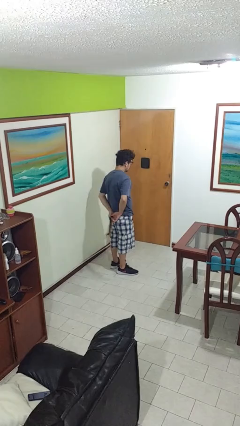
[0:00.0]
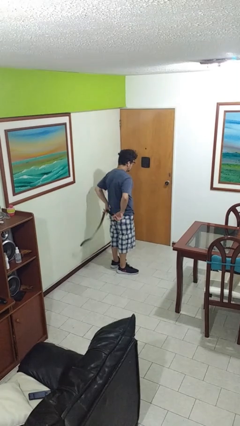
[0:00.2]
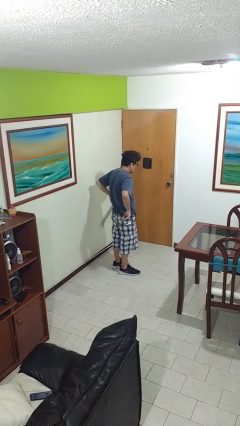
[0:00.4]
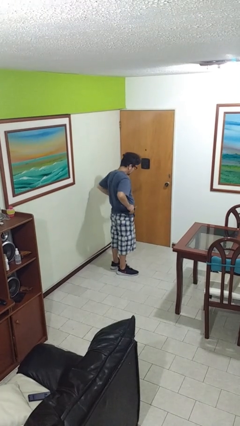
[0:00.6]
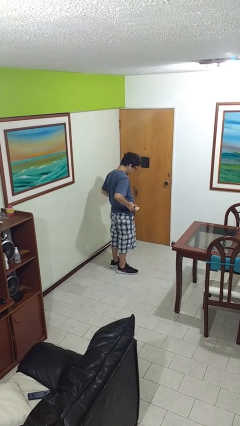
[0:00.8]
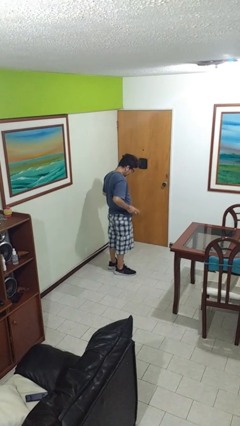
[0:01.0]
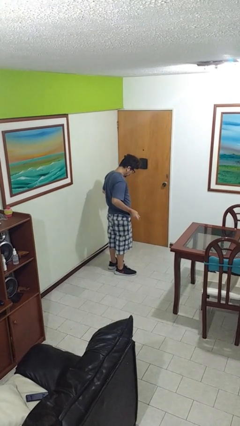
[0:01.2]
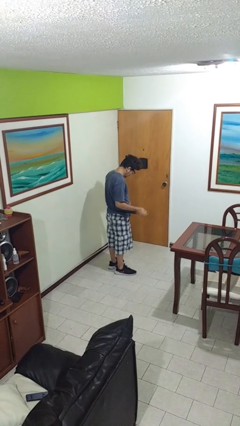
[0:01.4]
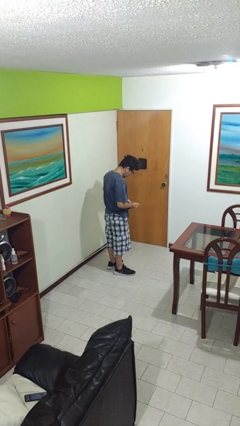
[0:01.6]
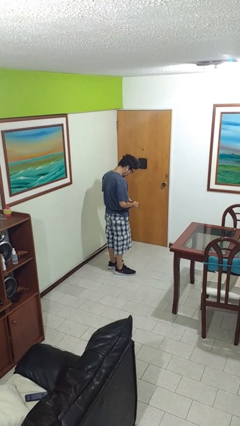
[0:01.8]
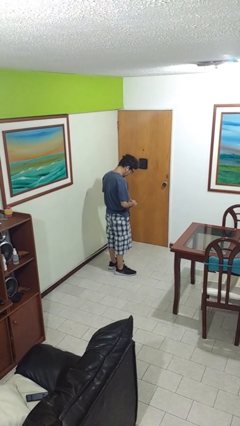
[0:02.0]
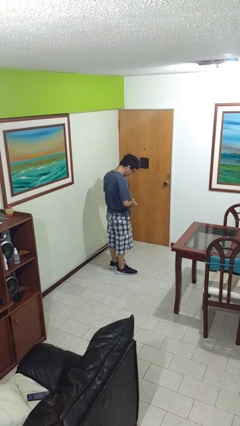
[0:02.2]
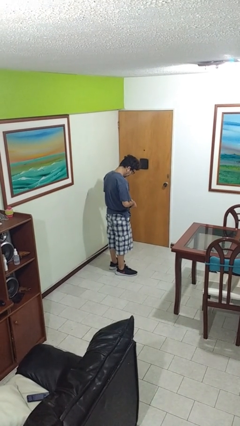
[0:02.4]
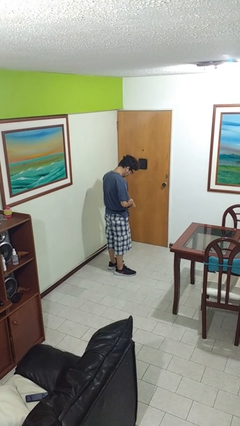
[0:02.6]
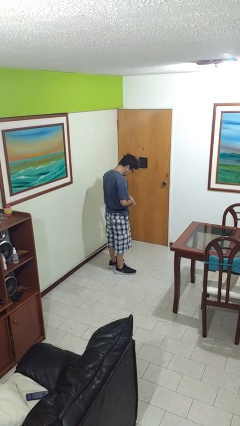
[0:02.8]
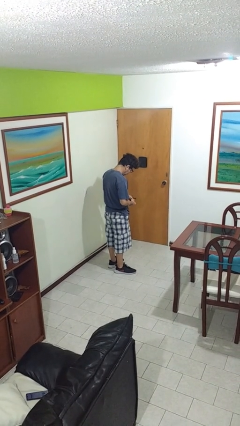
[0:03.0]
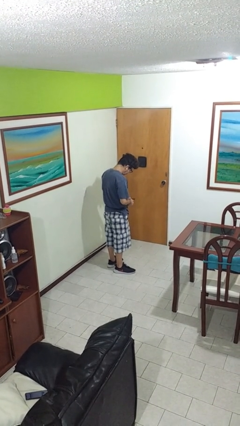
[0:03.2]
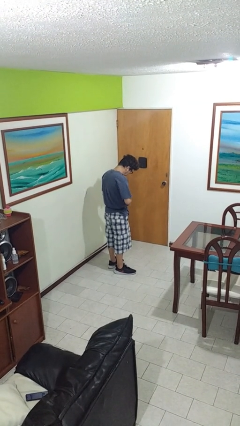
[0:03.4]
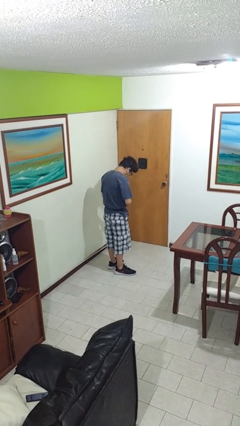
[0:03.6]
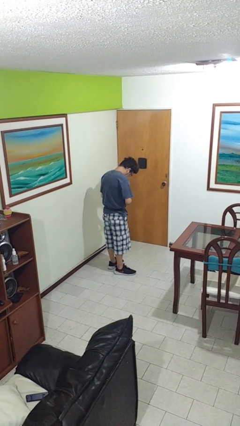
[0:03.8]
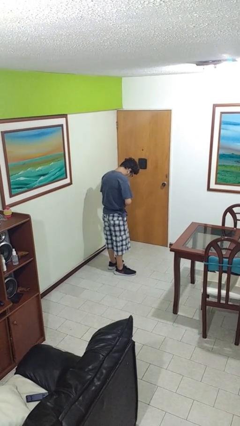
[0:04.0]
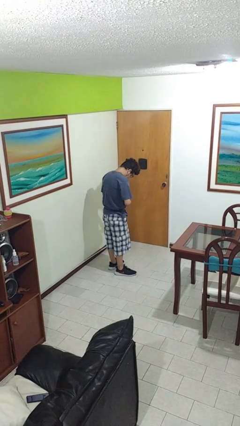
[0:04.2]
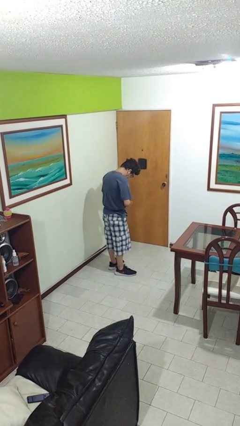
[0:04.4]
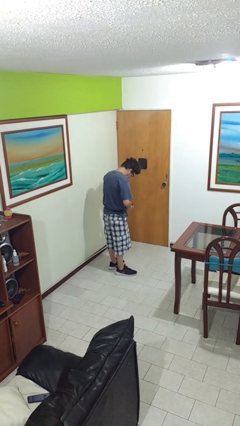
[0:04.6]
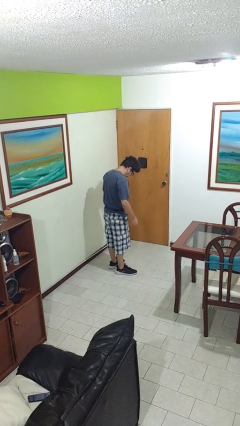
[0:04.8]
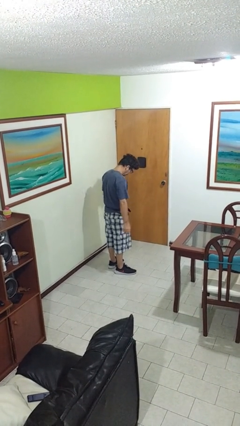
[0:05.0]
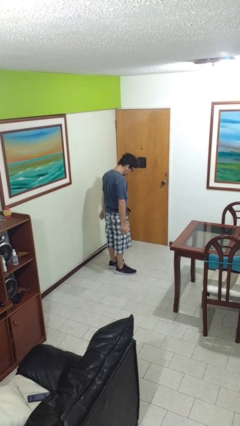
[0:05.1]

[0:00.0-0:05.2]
person puts on belt

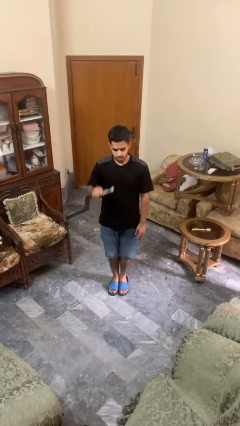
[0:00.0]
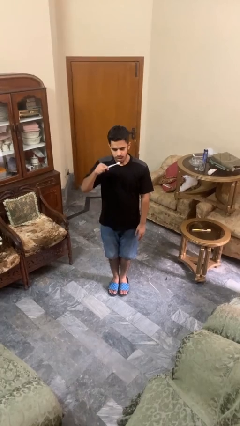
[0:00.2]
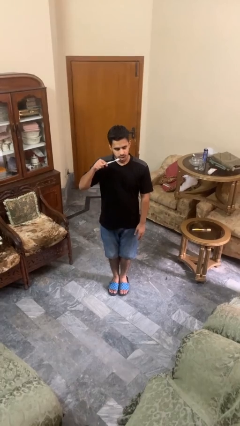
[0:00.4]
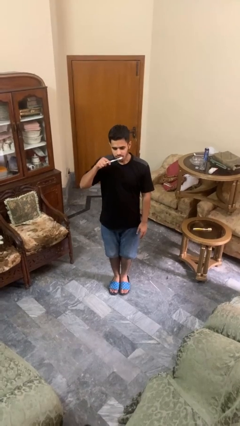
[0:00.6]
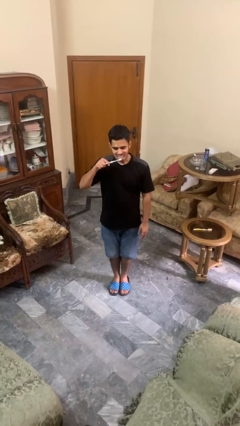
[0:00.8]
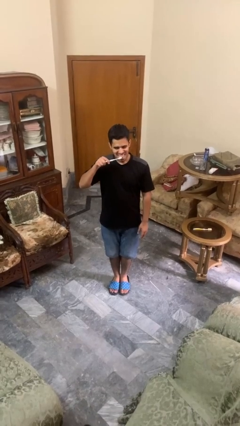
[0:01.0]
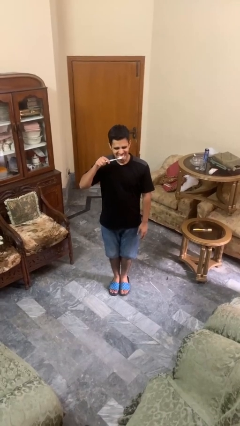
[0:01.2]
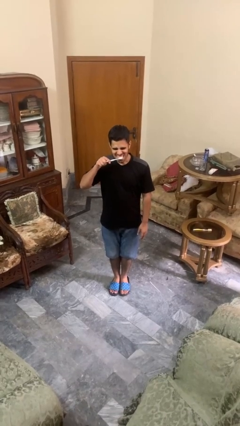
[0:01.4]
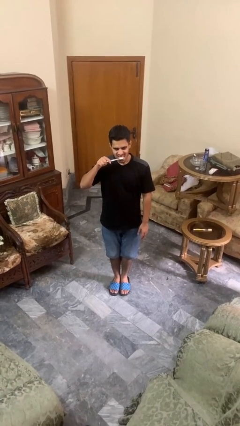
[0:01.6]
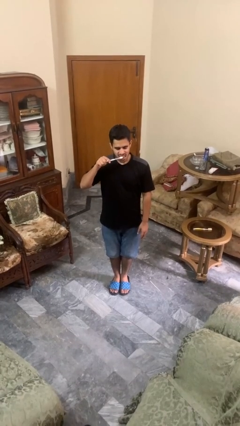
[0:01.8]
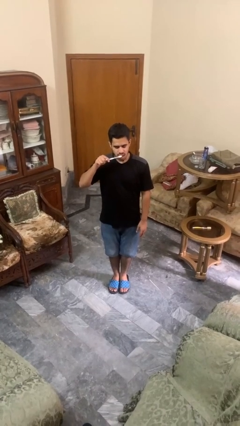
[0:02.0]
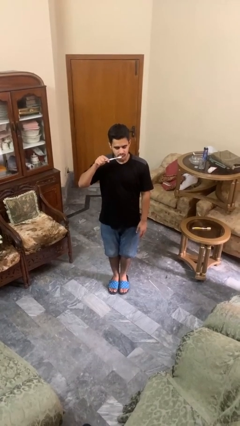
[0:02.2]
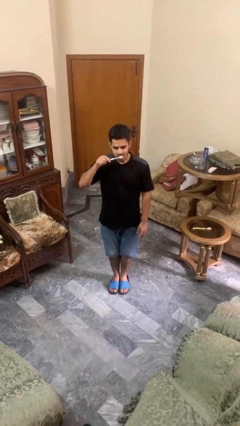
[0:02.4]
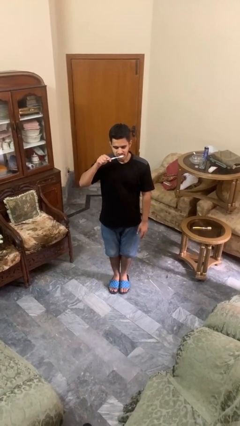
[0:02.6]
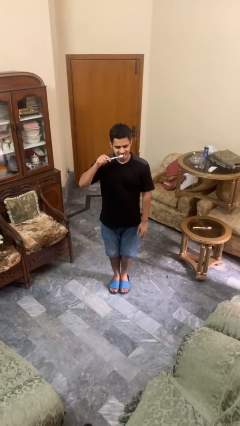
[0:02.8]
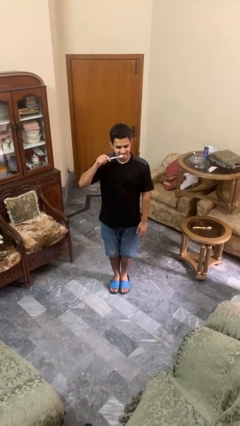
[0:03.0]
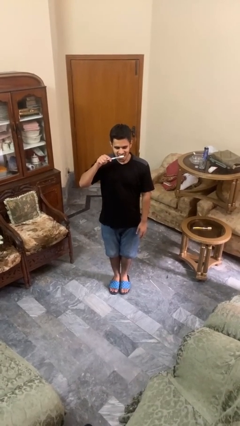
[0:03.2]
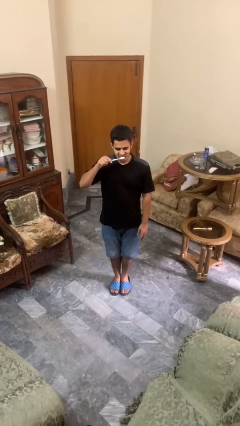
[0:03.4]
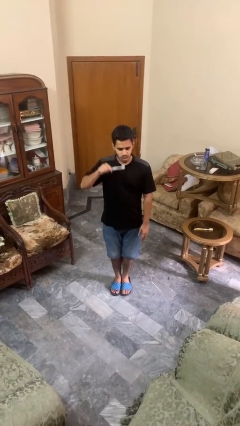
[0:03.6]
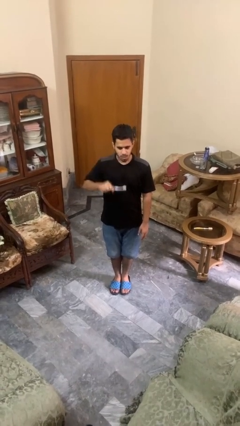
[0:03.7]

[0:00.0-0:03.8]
person brushes teeth

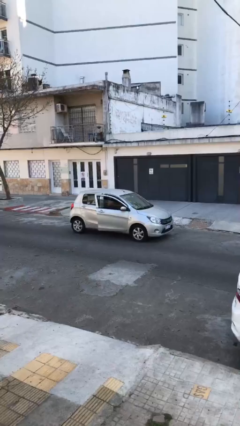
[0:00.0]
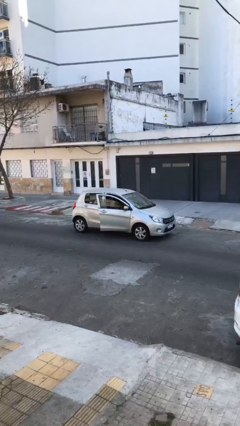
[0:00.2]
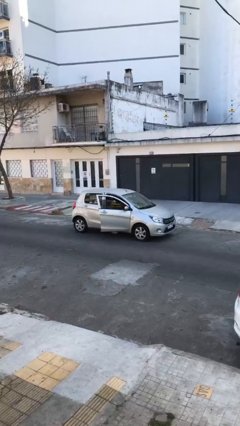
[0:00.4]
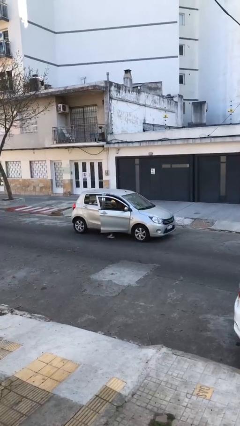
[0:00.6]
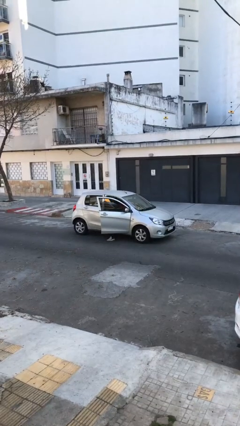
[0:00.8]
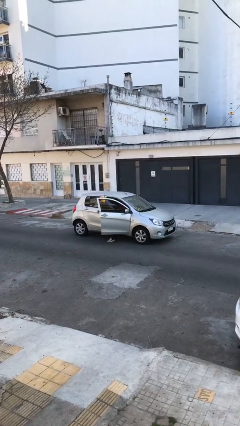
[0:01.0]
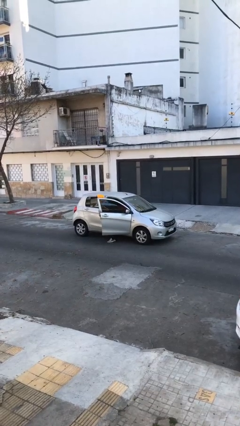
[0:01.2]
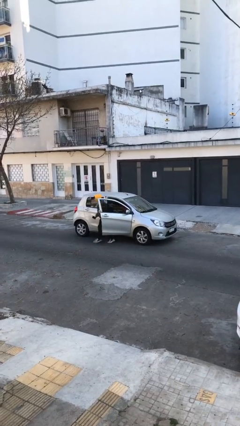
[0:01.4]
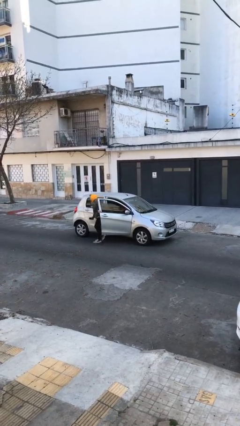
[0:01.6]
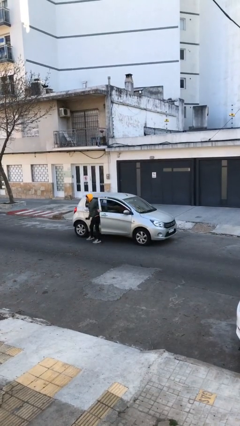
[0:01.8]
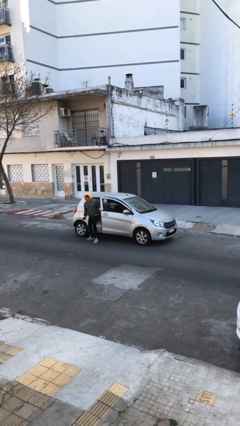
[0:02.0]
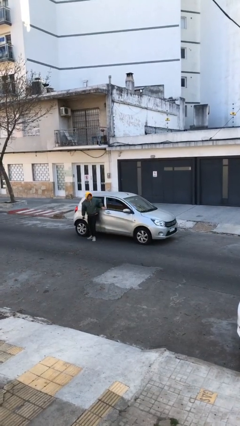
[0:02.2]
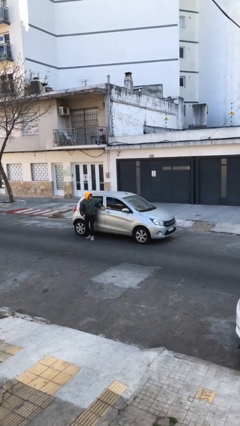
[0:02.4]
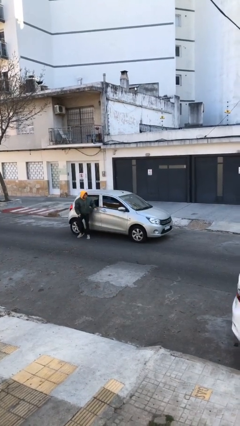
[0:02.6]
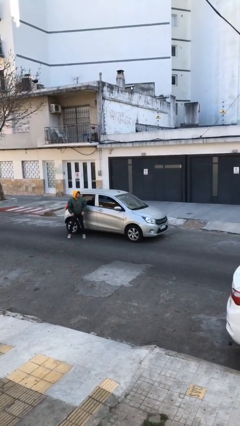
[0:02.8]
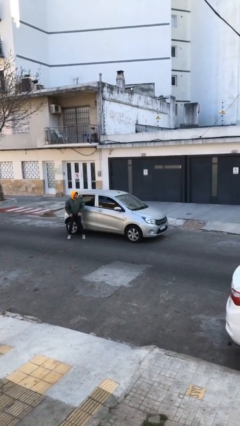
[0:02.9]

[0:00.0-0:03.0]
car drops off person

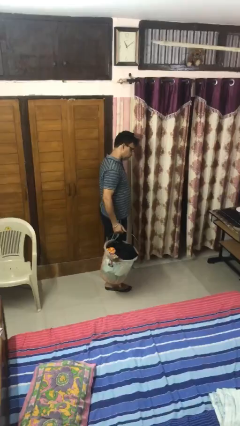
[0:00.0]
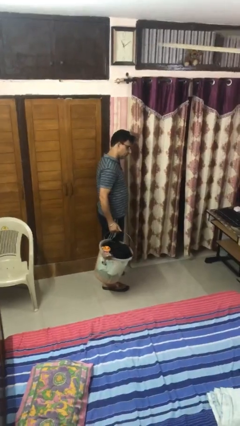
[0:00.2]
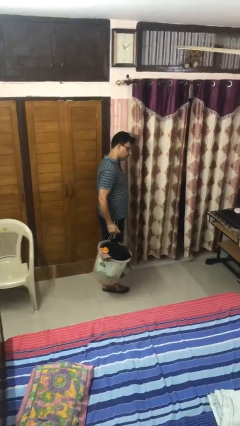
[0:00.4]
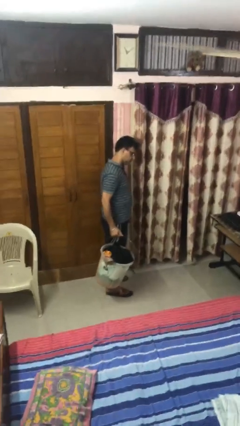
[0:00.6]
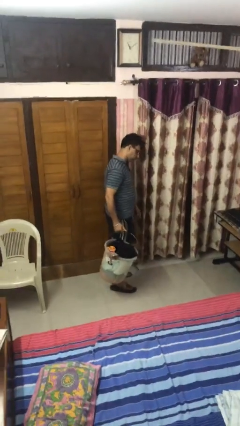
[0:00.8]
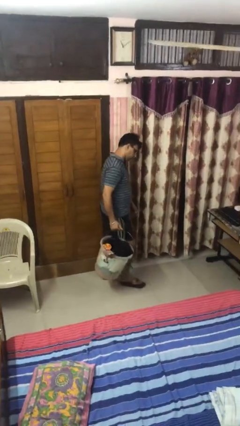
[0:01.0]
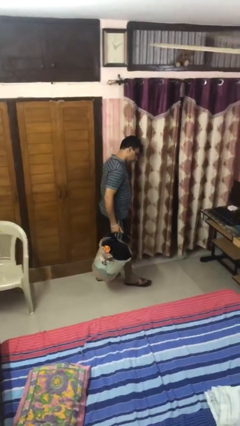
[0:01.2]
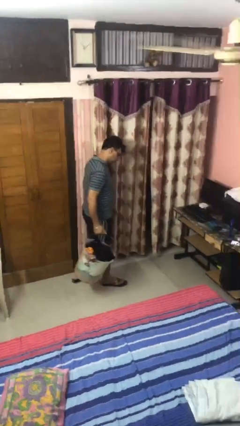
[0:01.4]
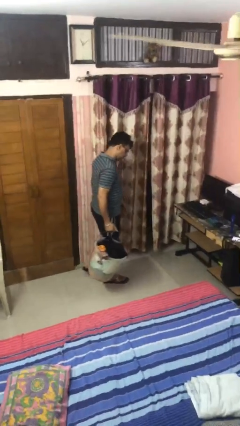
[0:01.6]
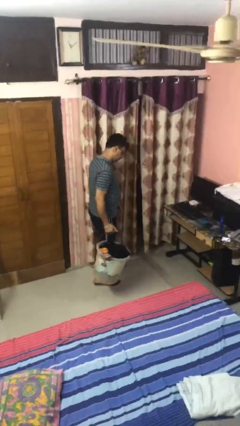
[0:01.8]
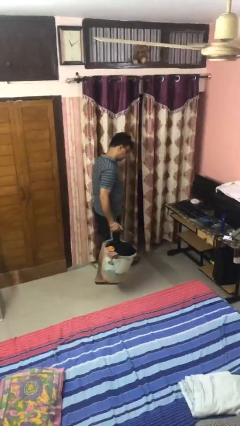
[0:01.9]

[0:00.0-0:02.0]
person carries laundry basket

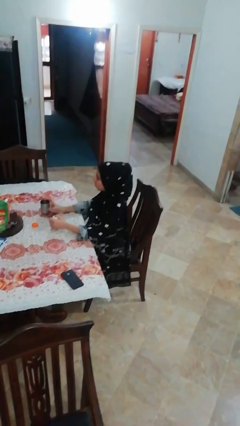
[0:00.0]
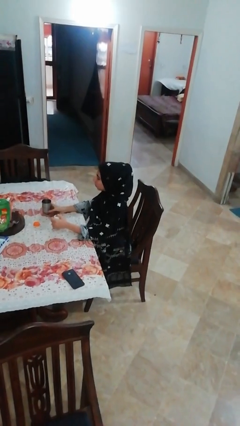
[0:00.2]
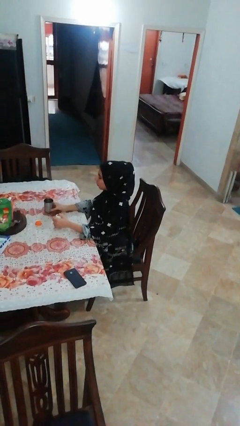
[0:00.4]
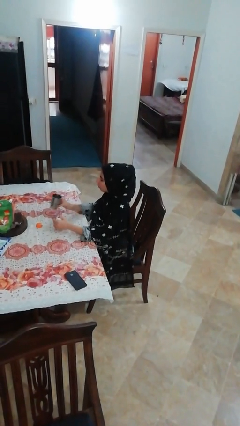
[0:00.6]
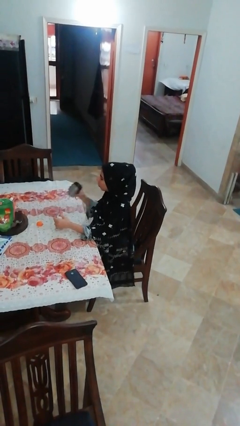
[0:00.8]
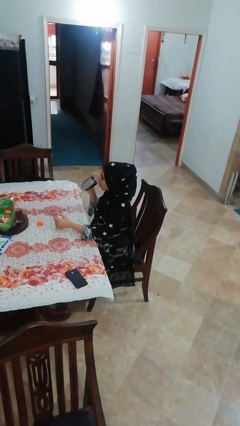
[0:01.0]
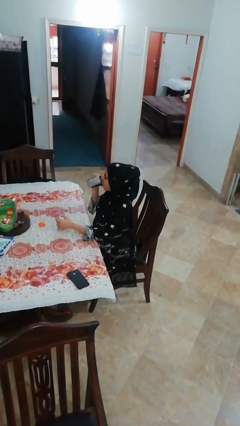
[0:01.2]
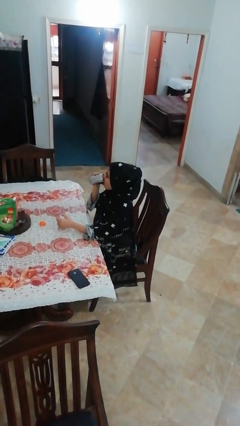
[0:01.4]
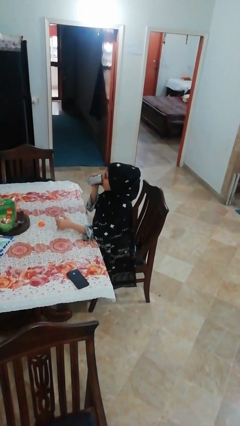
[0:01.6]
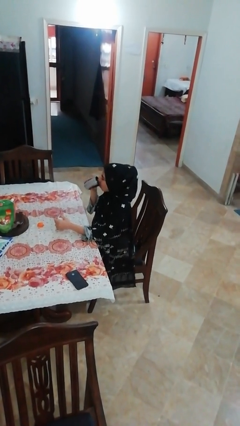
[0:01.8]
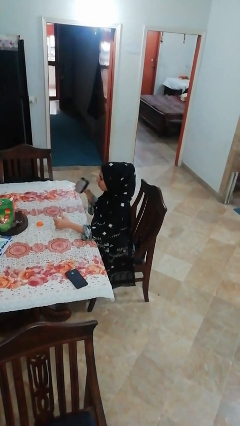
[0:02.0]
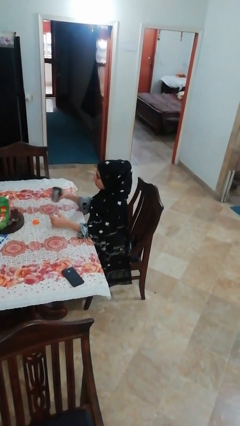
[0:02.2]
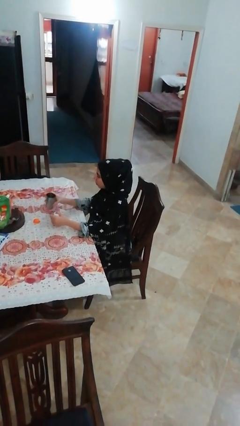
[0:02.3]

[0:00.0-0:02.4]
person drinks from cup

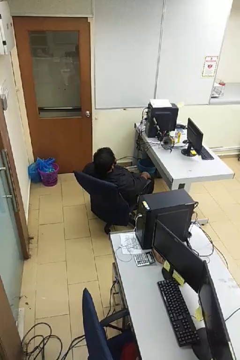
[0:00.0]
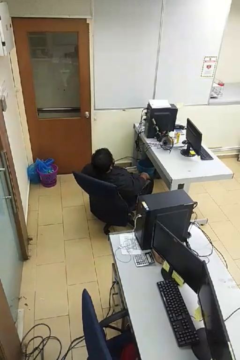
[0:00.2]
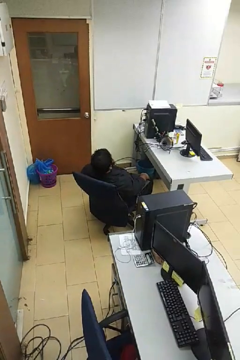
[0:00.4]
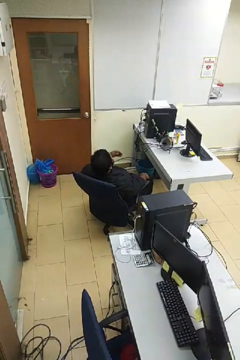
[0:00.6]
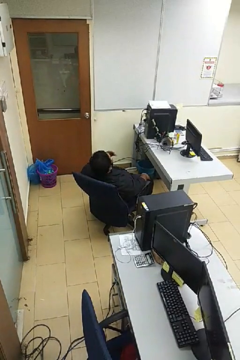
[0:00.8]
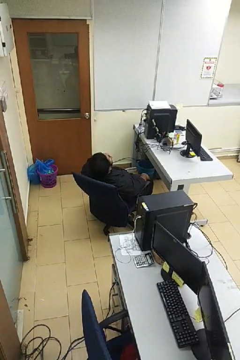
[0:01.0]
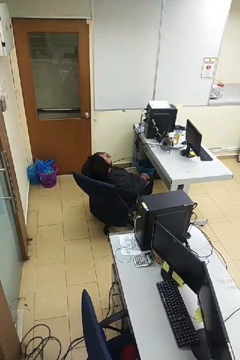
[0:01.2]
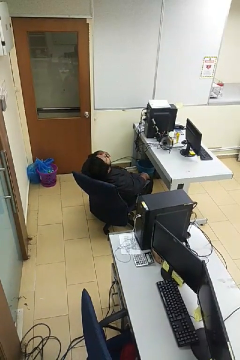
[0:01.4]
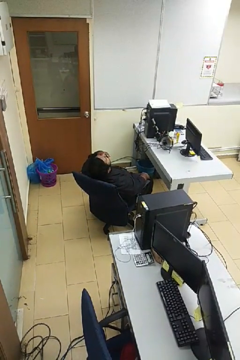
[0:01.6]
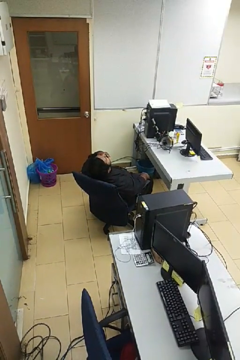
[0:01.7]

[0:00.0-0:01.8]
person yawns
